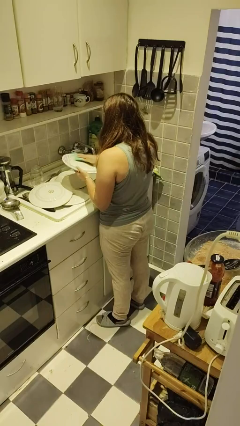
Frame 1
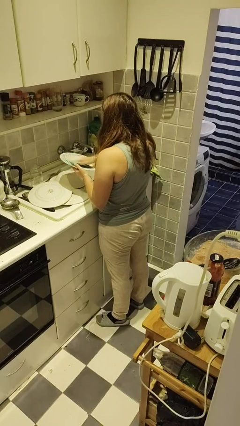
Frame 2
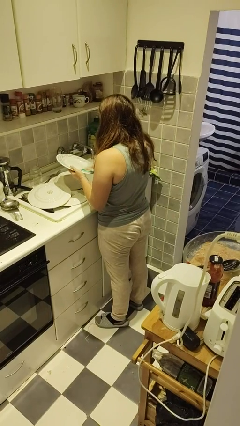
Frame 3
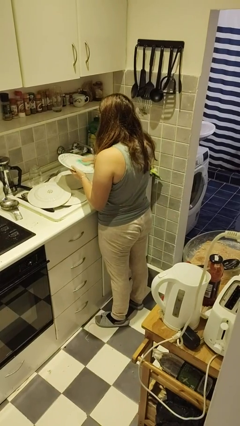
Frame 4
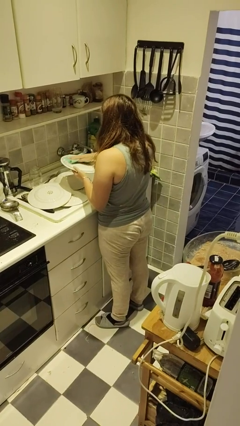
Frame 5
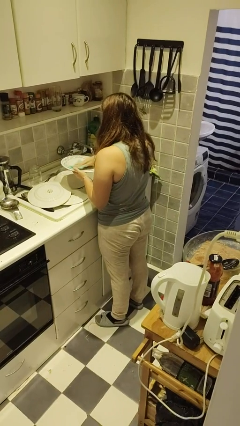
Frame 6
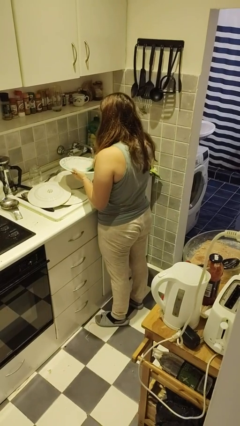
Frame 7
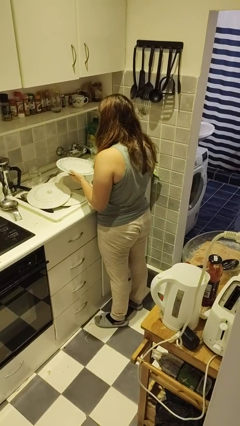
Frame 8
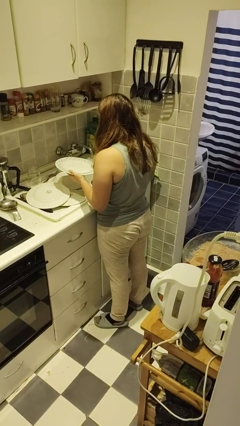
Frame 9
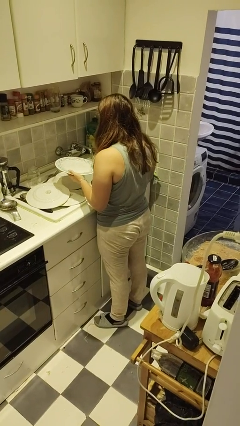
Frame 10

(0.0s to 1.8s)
person dries dish

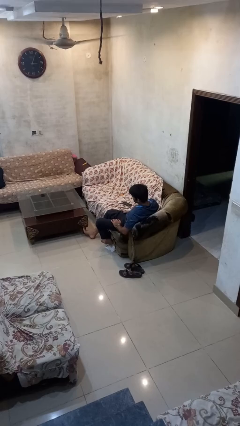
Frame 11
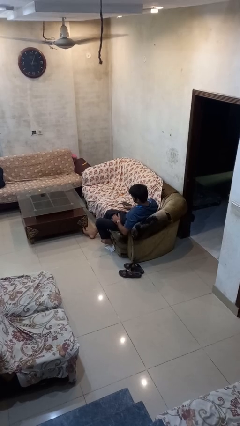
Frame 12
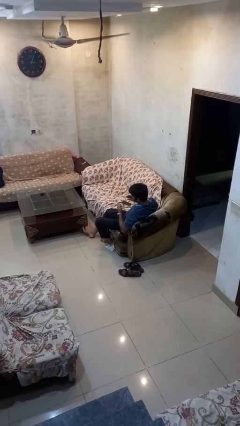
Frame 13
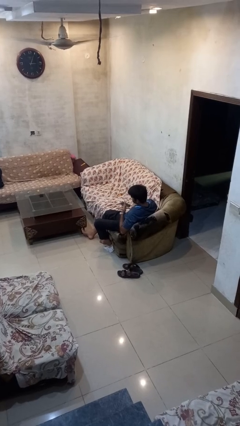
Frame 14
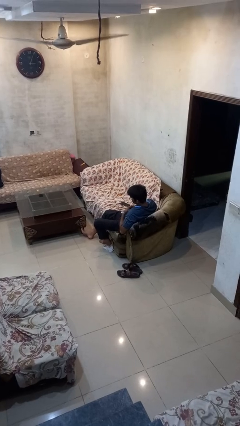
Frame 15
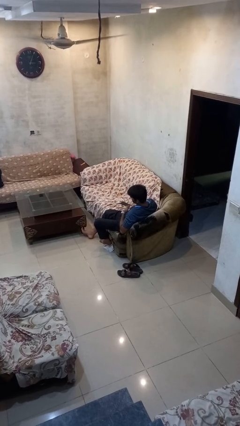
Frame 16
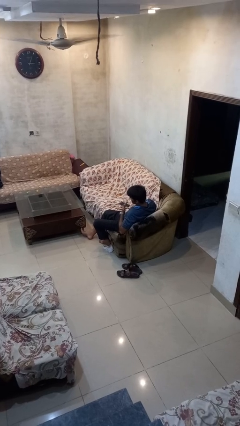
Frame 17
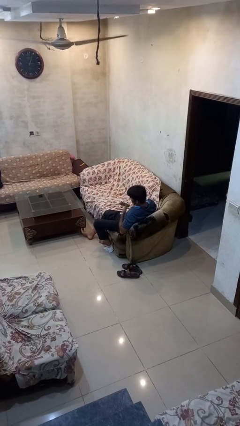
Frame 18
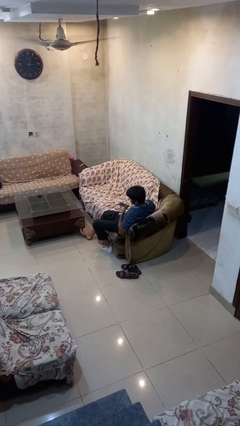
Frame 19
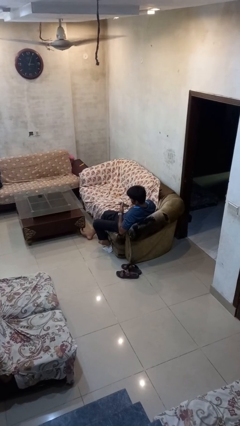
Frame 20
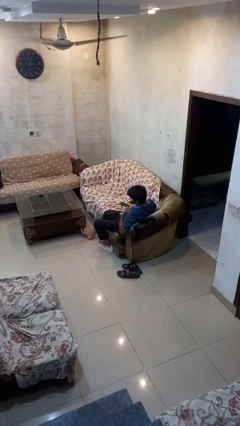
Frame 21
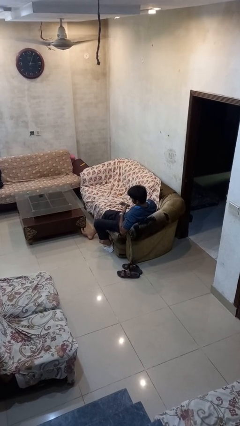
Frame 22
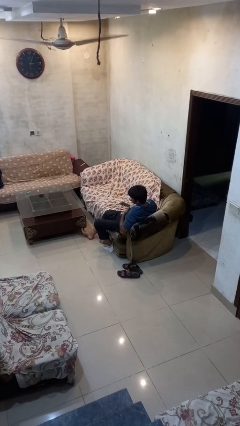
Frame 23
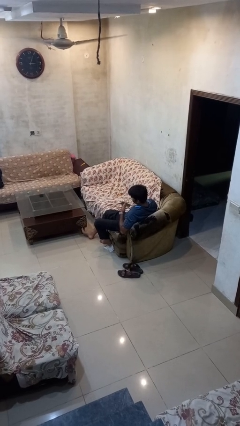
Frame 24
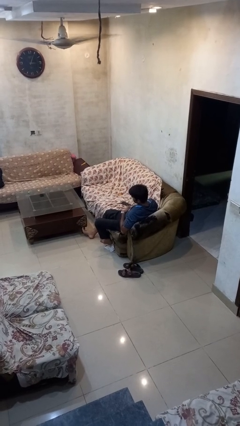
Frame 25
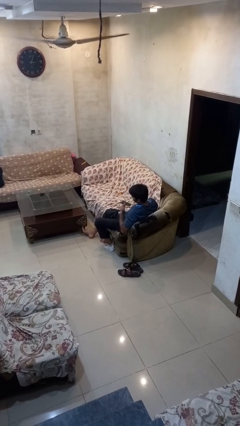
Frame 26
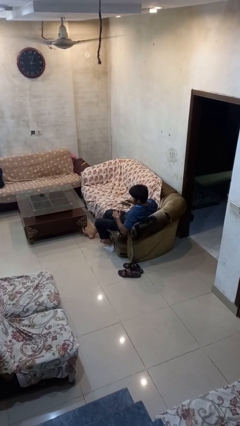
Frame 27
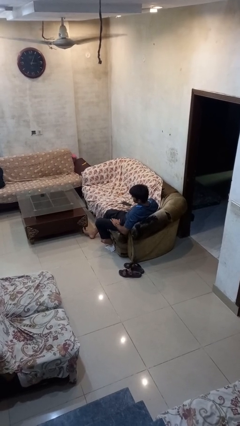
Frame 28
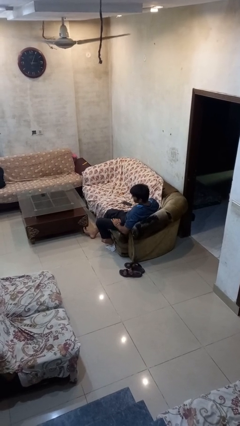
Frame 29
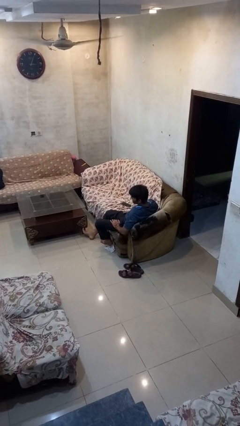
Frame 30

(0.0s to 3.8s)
person drums on chest

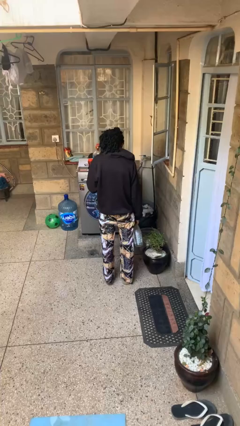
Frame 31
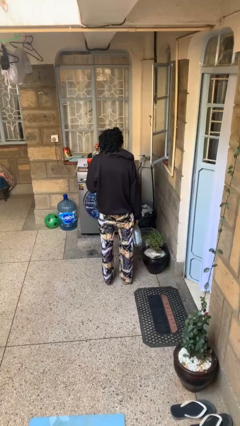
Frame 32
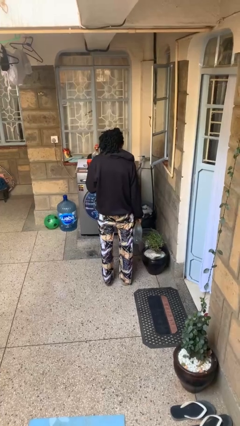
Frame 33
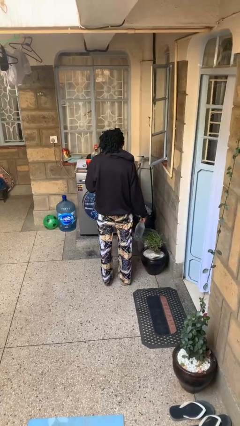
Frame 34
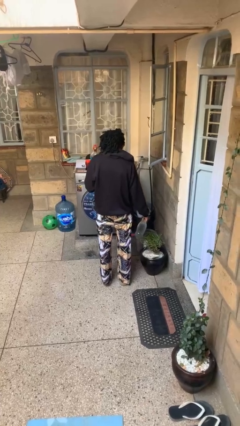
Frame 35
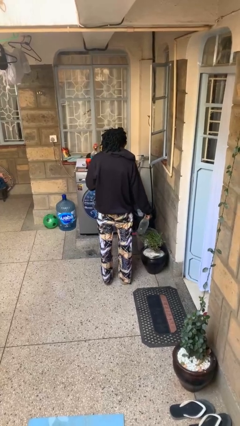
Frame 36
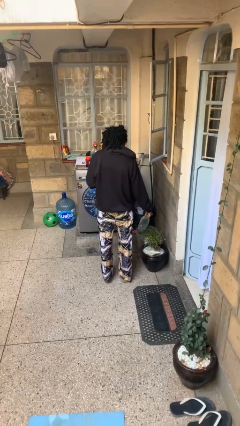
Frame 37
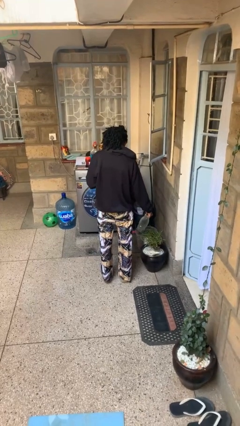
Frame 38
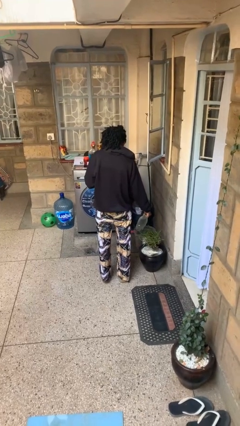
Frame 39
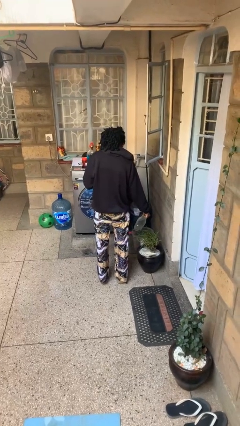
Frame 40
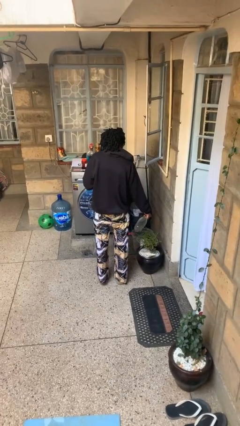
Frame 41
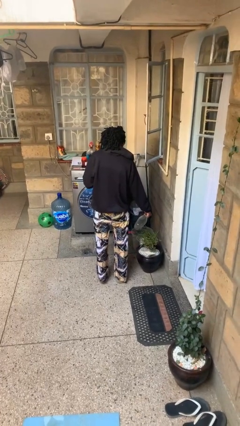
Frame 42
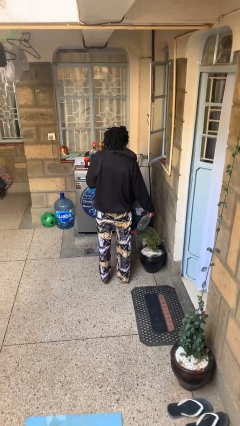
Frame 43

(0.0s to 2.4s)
person waters houseplant

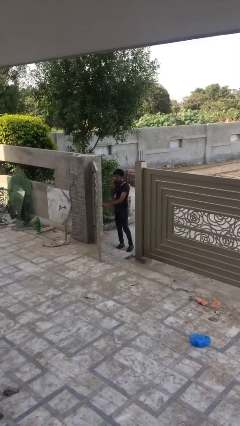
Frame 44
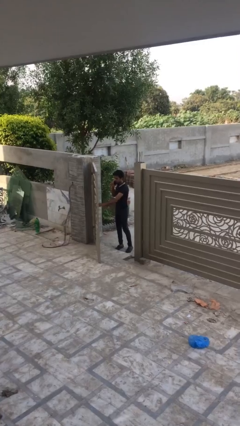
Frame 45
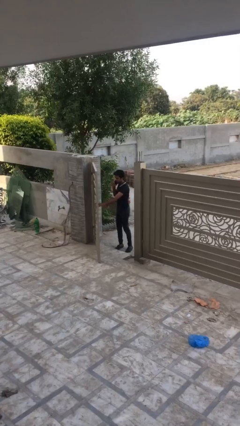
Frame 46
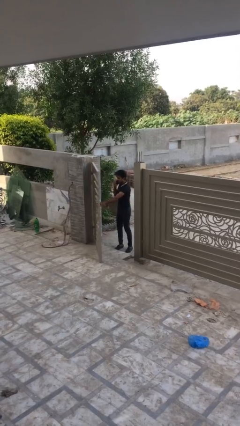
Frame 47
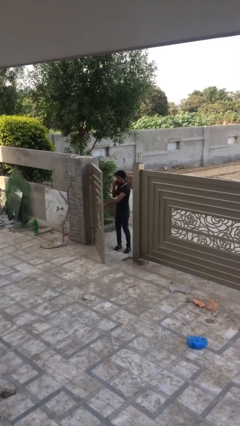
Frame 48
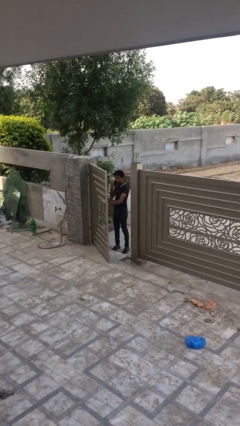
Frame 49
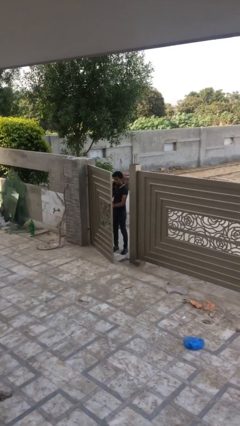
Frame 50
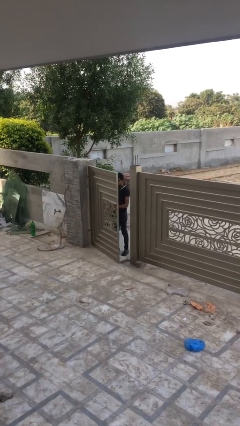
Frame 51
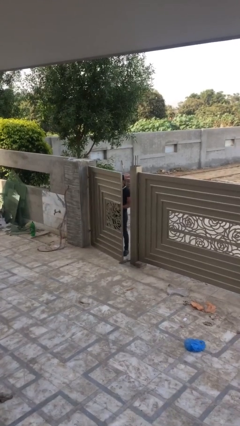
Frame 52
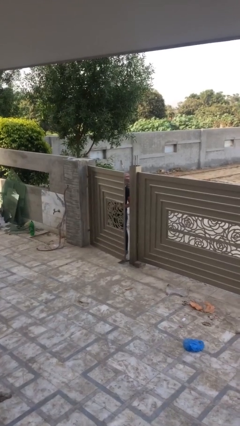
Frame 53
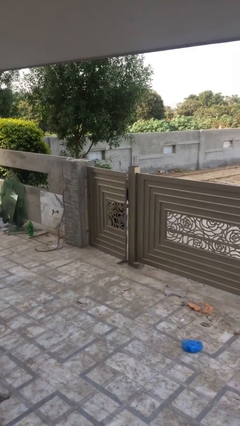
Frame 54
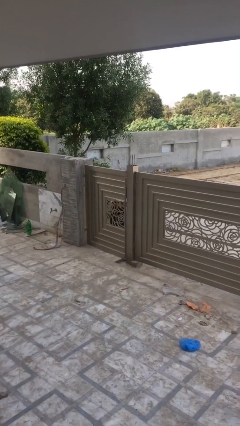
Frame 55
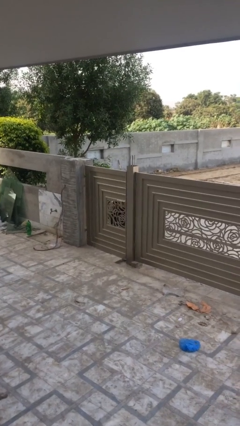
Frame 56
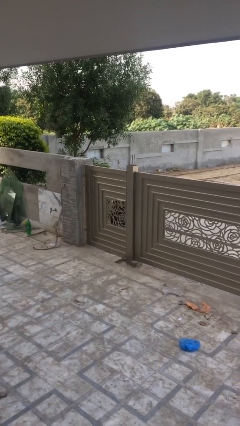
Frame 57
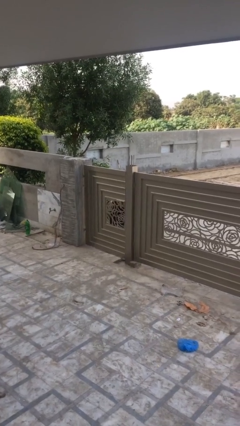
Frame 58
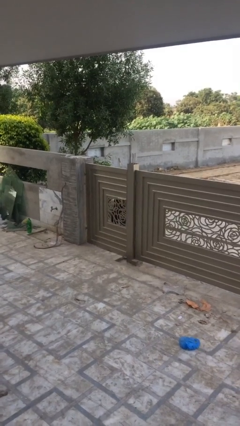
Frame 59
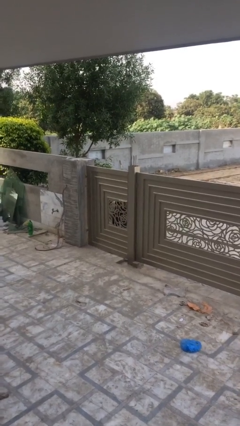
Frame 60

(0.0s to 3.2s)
person closes facility door

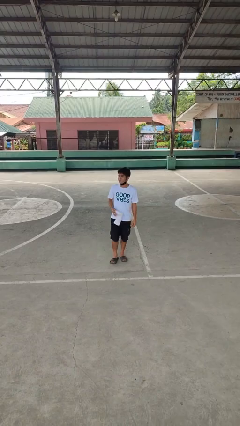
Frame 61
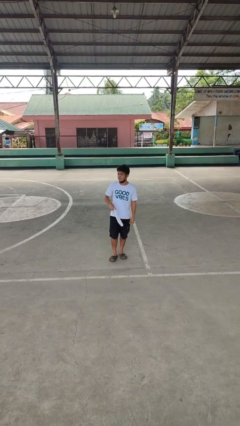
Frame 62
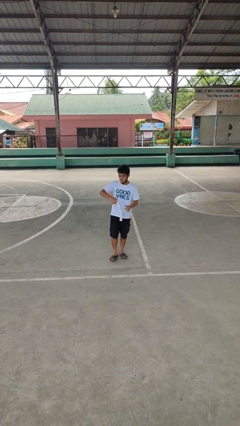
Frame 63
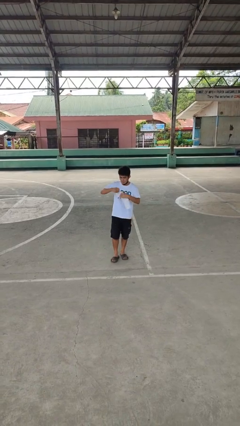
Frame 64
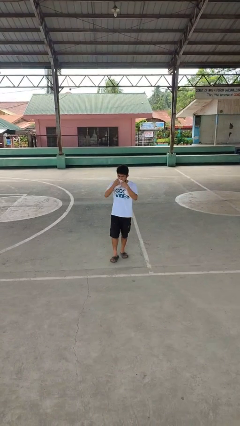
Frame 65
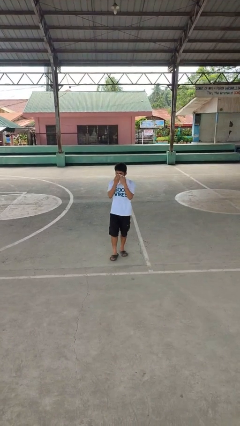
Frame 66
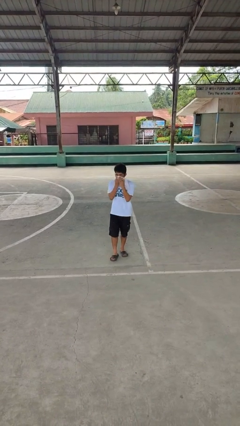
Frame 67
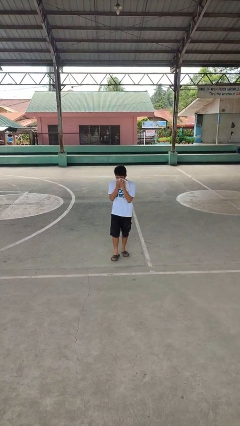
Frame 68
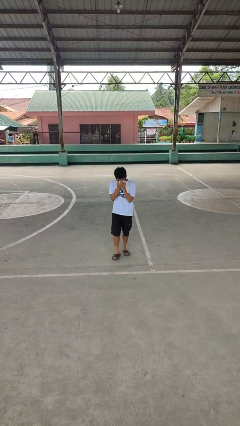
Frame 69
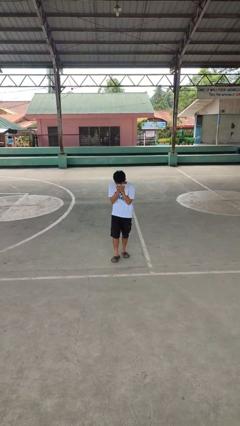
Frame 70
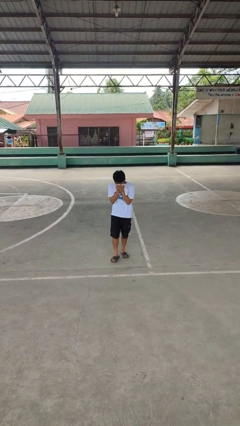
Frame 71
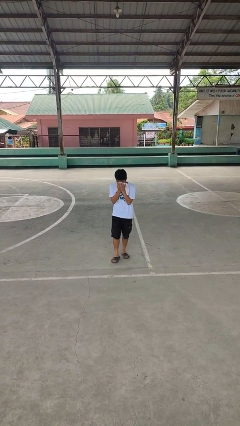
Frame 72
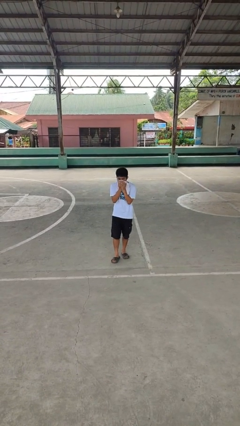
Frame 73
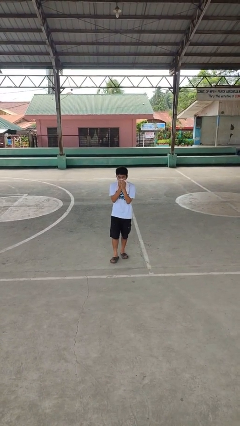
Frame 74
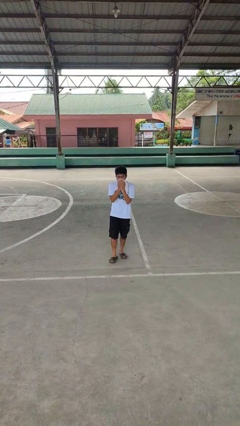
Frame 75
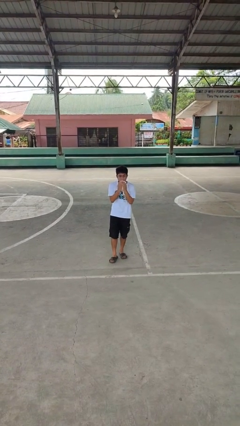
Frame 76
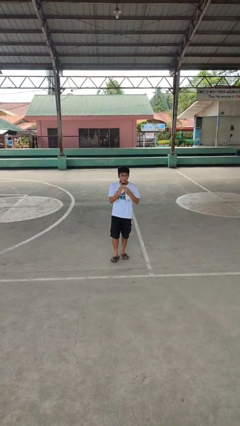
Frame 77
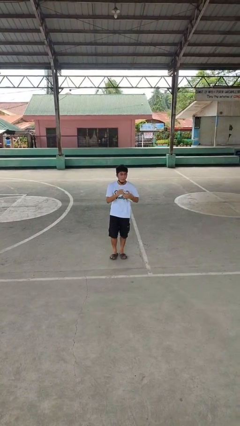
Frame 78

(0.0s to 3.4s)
person blows nose

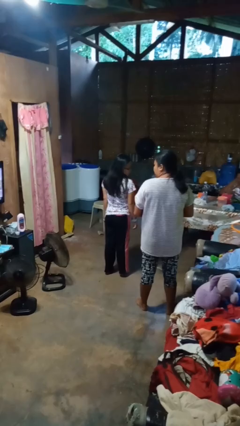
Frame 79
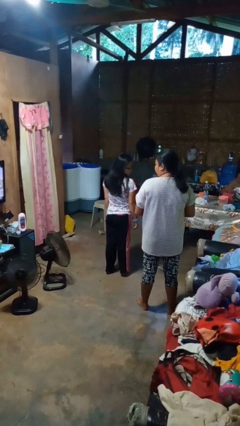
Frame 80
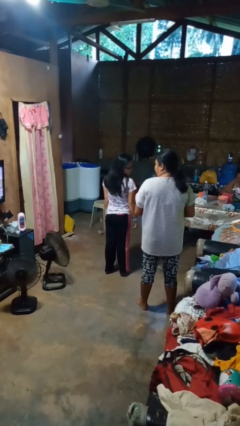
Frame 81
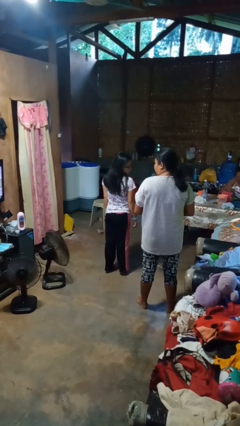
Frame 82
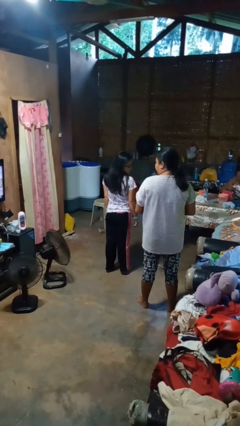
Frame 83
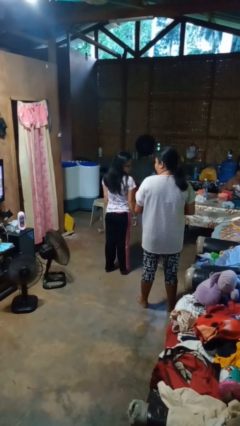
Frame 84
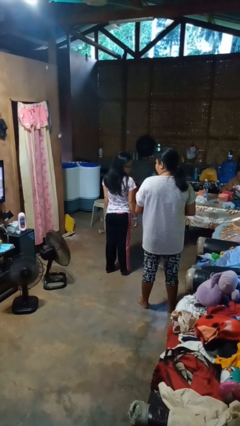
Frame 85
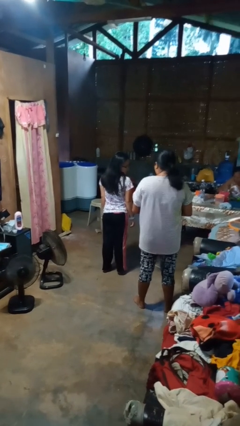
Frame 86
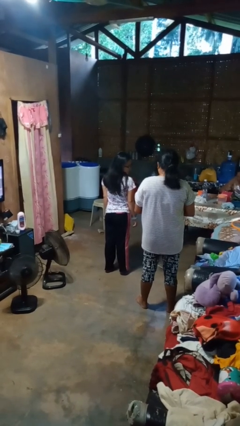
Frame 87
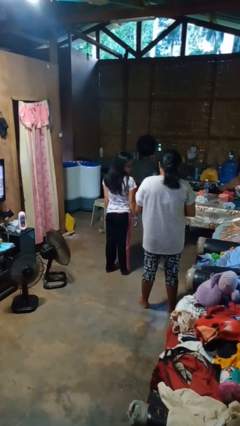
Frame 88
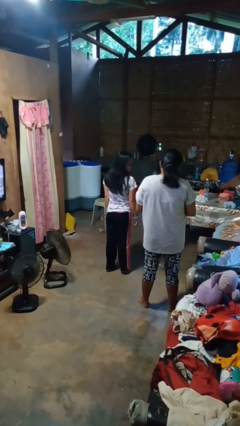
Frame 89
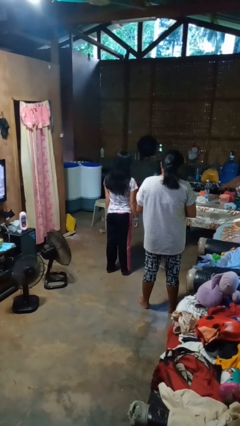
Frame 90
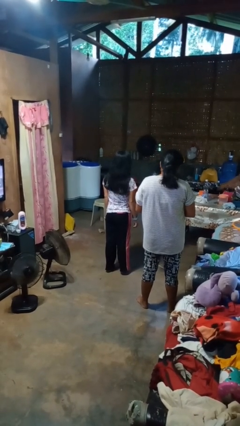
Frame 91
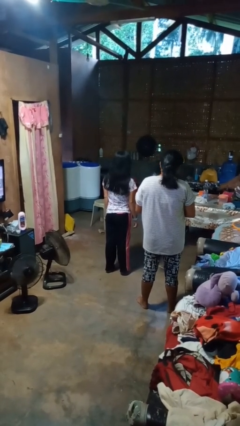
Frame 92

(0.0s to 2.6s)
person looks over shoulder

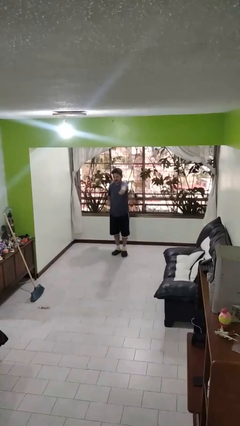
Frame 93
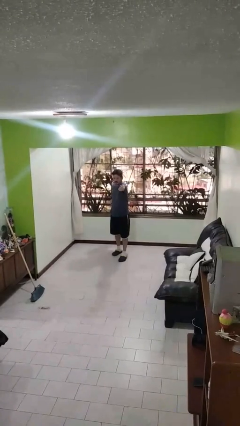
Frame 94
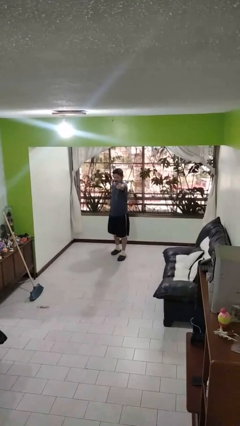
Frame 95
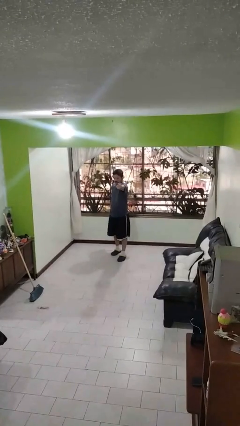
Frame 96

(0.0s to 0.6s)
person punches
